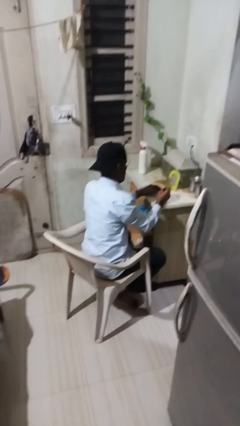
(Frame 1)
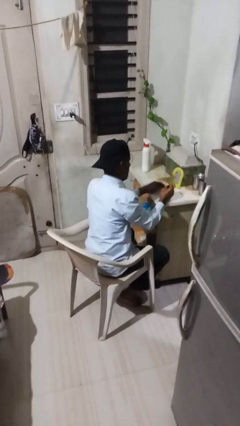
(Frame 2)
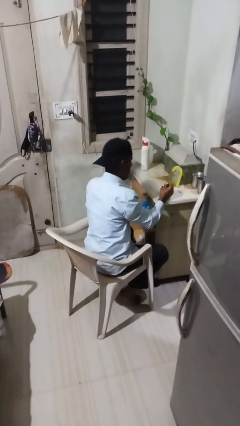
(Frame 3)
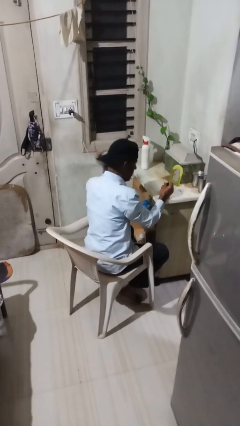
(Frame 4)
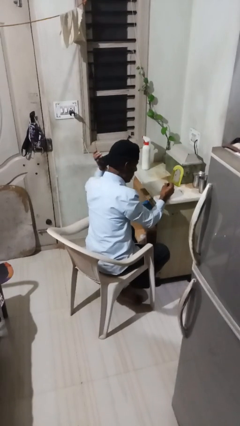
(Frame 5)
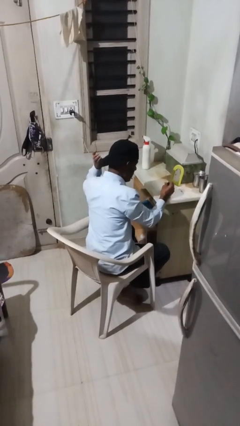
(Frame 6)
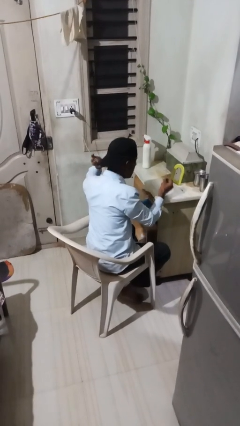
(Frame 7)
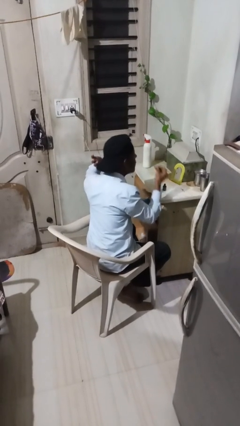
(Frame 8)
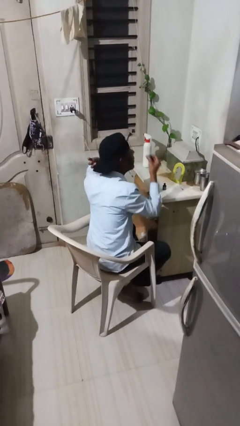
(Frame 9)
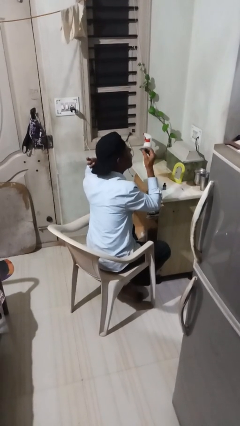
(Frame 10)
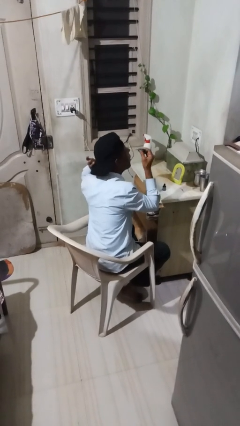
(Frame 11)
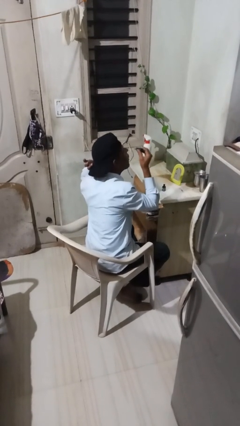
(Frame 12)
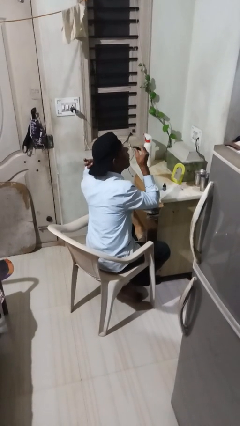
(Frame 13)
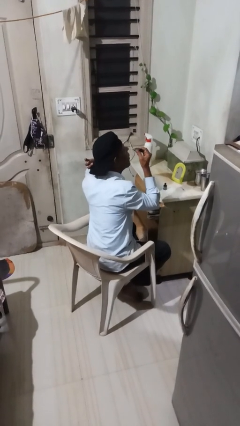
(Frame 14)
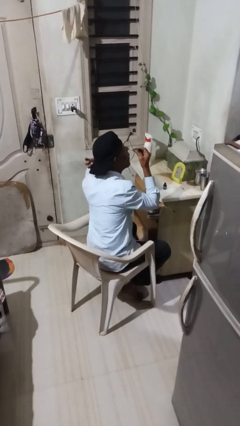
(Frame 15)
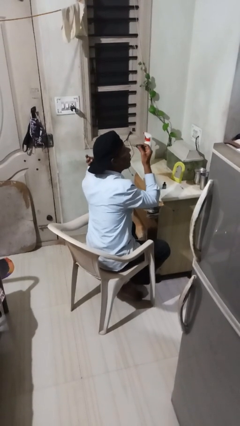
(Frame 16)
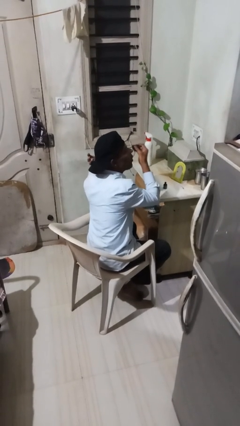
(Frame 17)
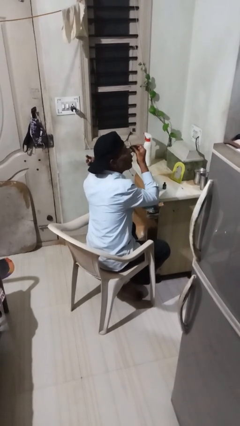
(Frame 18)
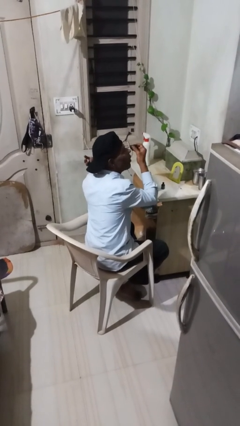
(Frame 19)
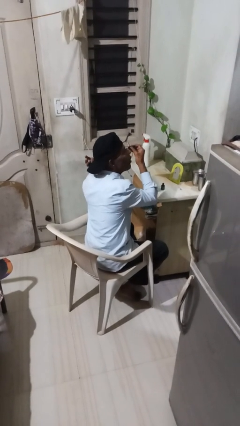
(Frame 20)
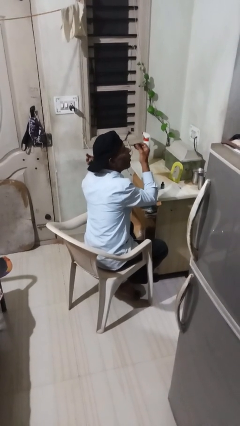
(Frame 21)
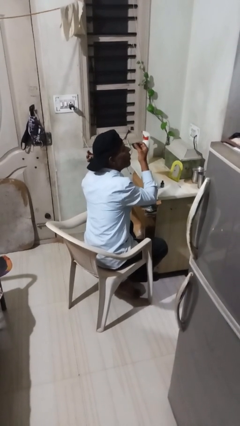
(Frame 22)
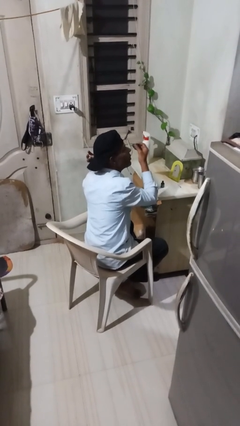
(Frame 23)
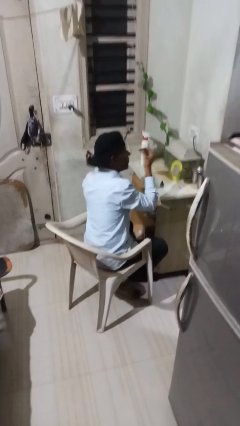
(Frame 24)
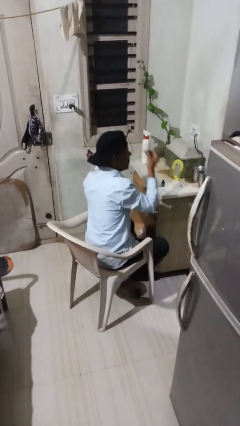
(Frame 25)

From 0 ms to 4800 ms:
person applies eye makeup

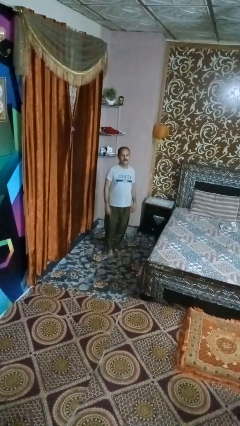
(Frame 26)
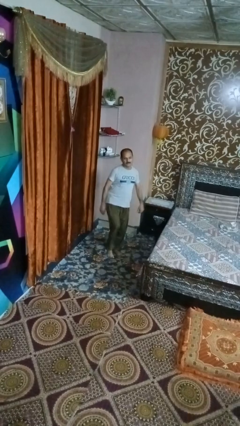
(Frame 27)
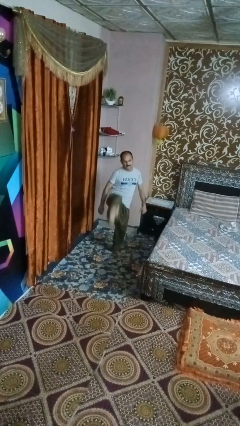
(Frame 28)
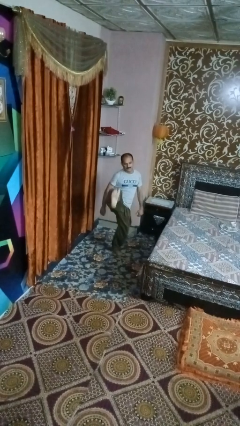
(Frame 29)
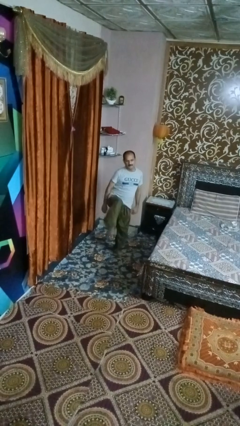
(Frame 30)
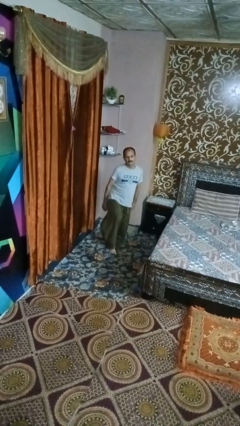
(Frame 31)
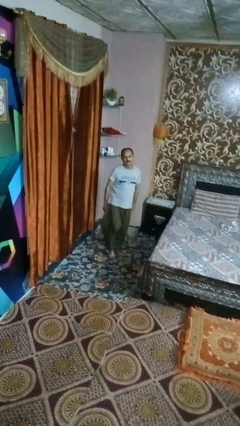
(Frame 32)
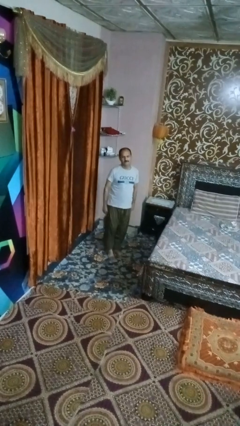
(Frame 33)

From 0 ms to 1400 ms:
person karate kicks

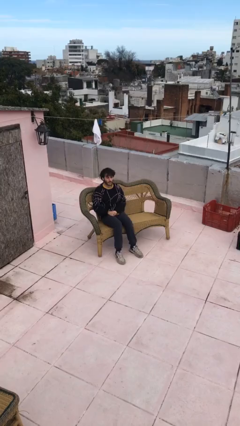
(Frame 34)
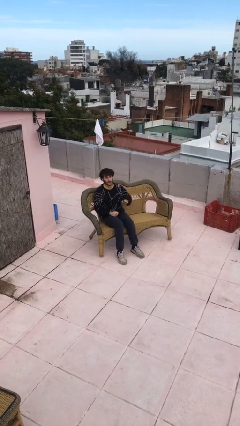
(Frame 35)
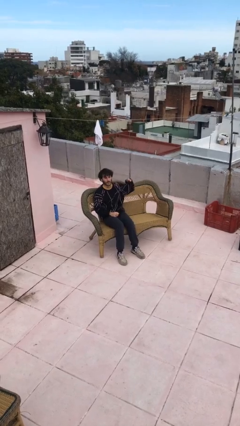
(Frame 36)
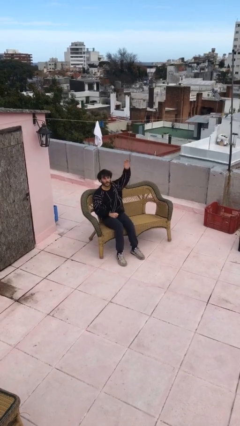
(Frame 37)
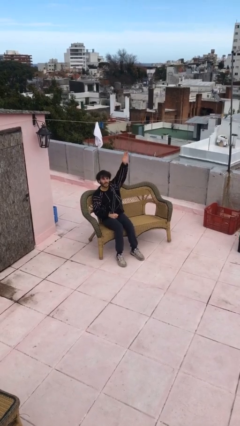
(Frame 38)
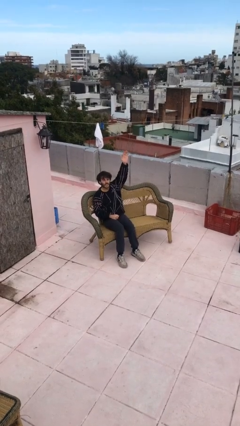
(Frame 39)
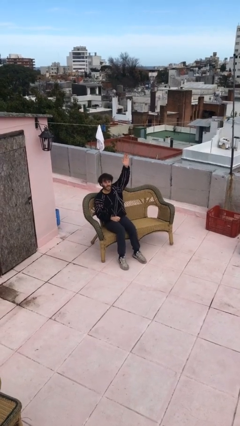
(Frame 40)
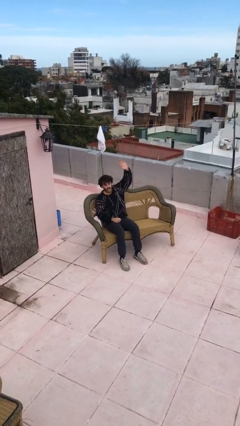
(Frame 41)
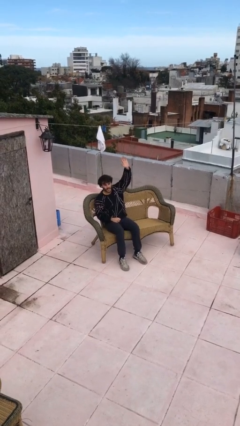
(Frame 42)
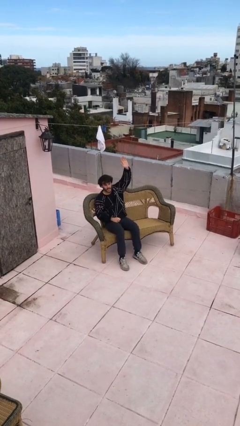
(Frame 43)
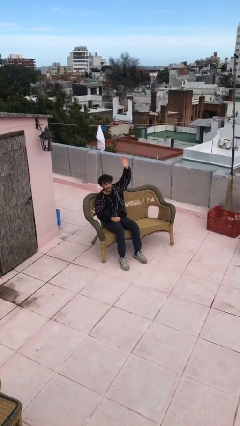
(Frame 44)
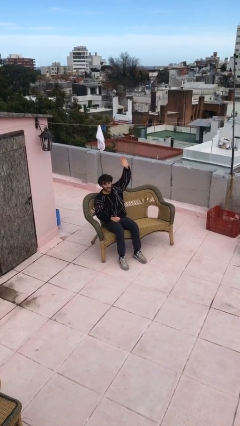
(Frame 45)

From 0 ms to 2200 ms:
person gestures raise hand

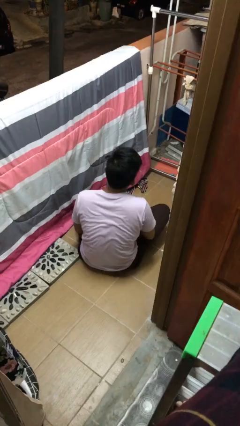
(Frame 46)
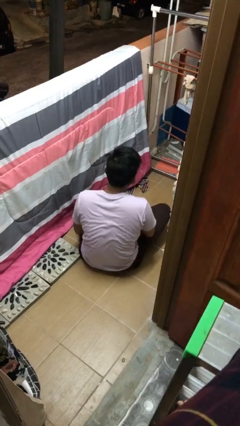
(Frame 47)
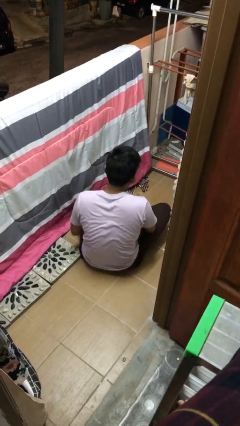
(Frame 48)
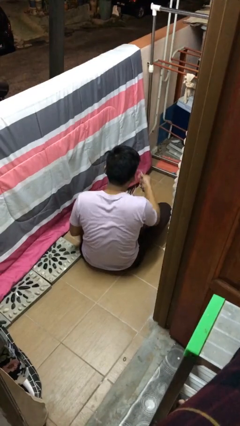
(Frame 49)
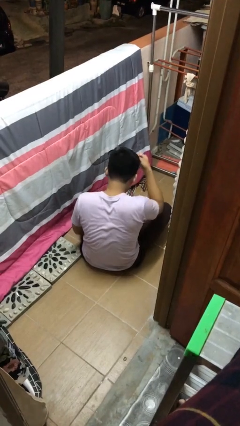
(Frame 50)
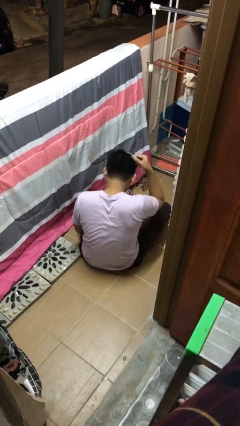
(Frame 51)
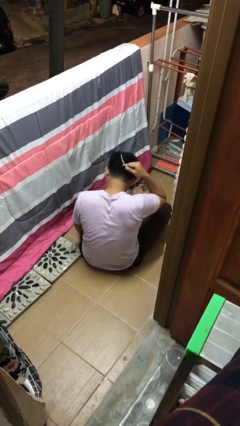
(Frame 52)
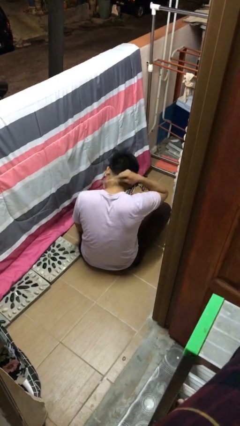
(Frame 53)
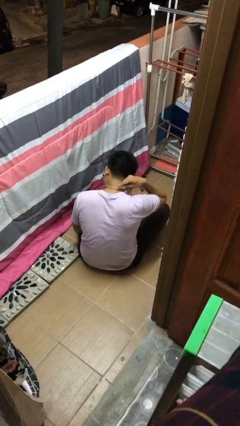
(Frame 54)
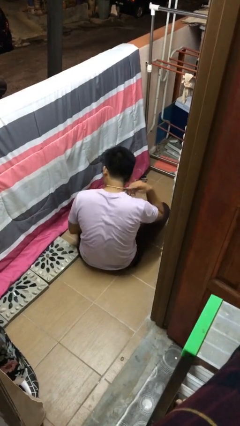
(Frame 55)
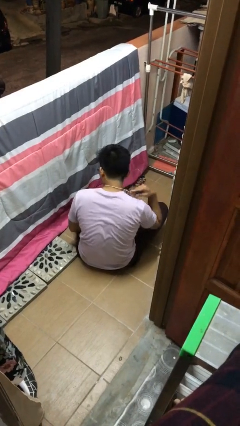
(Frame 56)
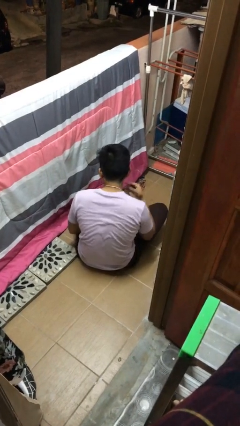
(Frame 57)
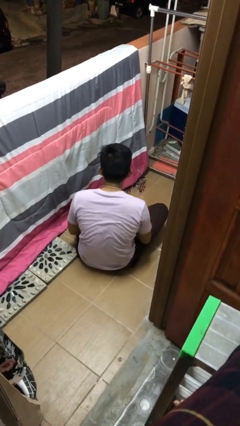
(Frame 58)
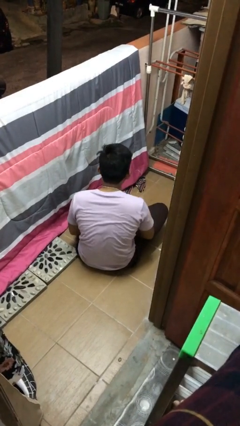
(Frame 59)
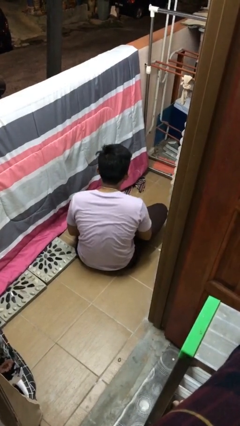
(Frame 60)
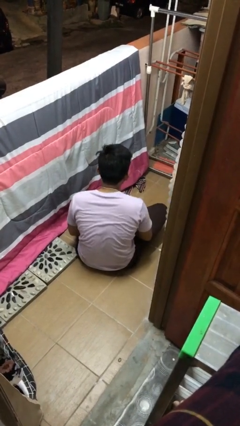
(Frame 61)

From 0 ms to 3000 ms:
person puts on necklace

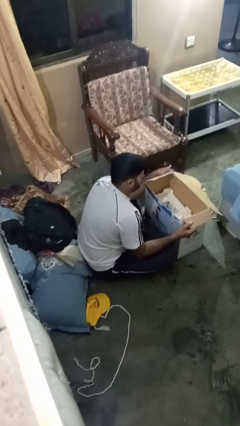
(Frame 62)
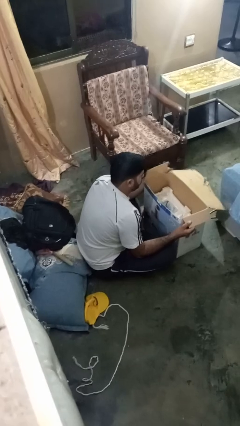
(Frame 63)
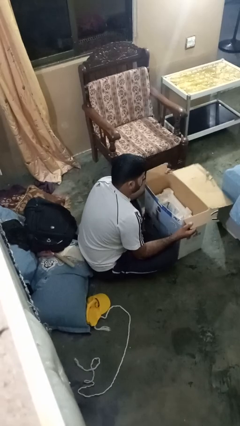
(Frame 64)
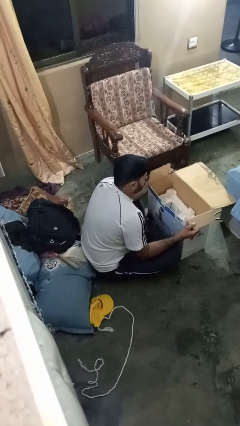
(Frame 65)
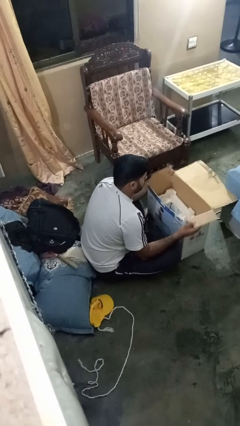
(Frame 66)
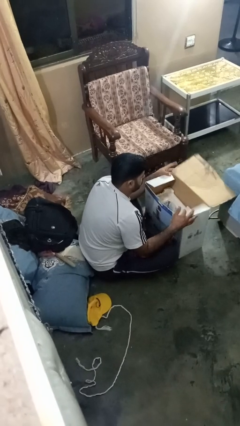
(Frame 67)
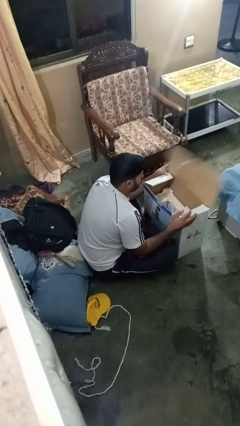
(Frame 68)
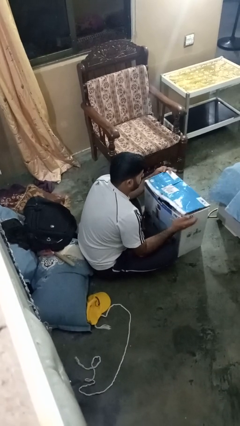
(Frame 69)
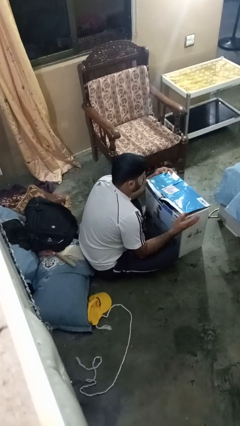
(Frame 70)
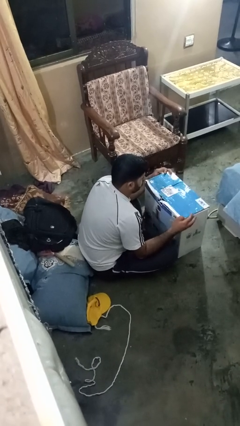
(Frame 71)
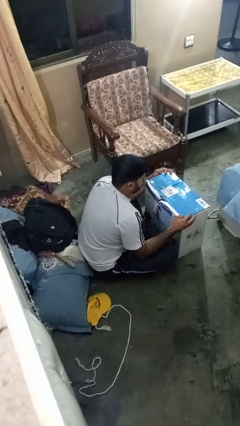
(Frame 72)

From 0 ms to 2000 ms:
person closes box

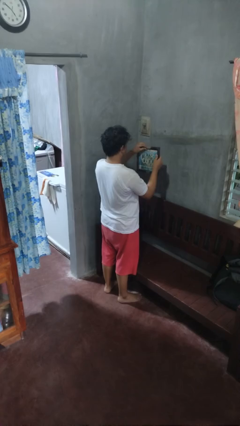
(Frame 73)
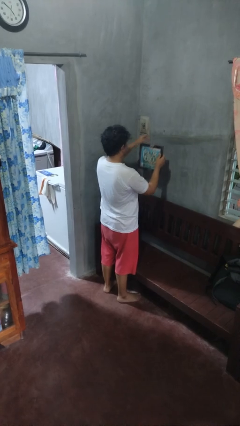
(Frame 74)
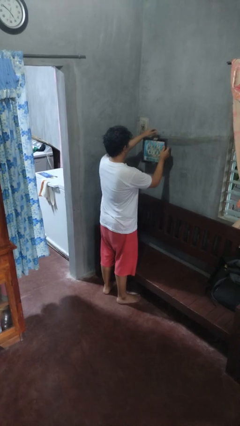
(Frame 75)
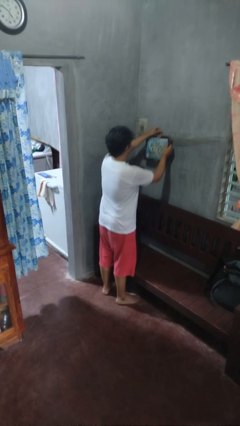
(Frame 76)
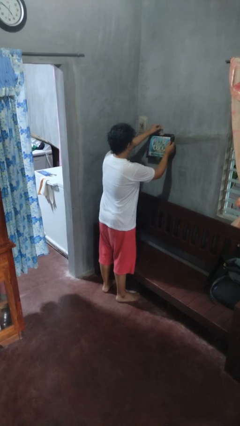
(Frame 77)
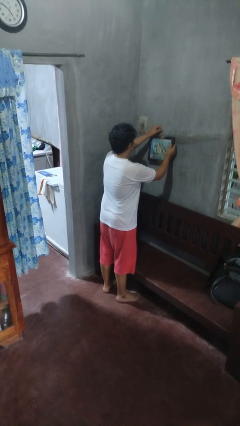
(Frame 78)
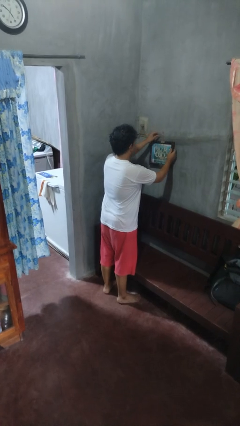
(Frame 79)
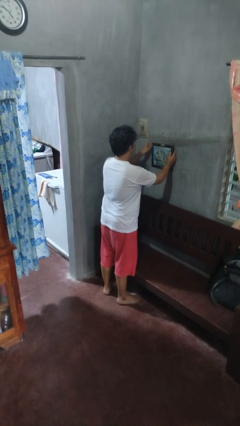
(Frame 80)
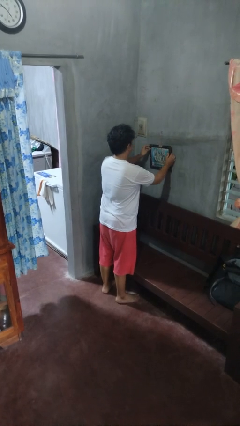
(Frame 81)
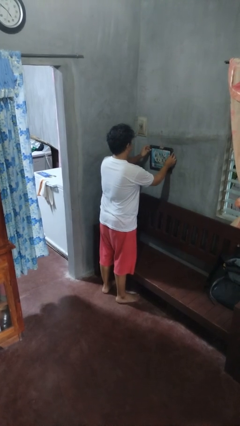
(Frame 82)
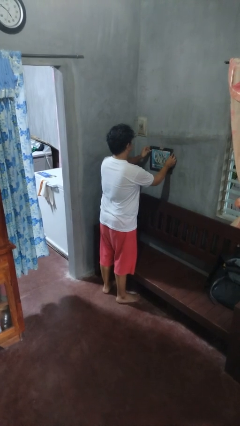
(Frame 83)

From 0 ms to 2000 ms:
person puts up picture frame

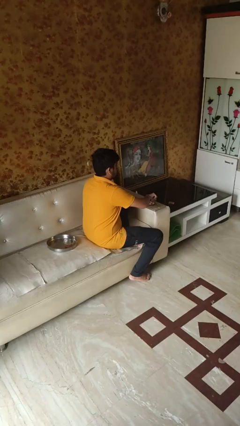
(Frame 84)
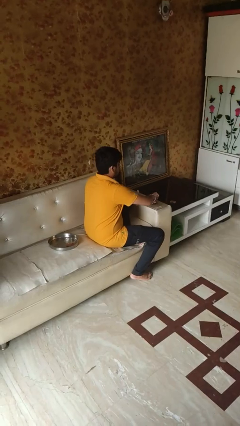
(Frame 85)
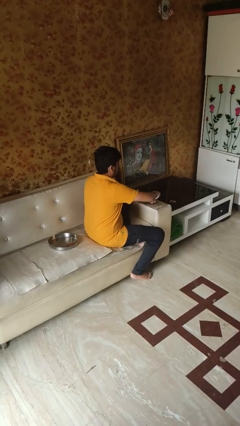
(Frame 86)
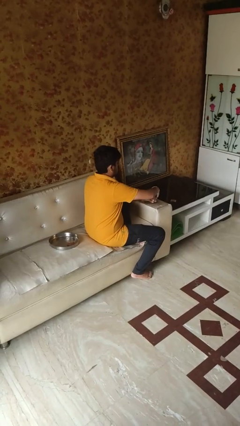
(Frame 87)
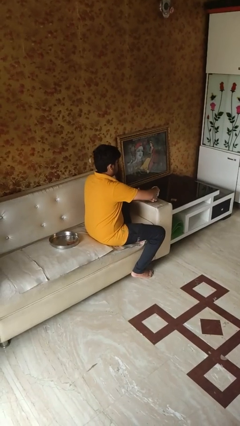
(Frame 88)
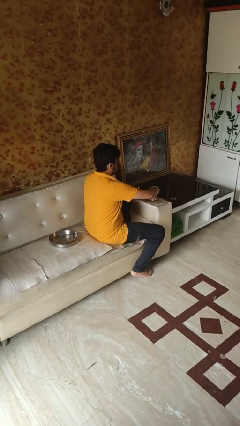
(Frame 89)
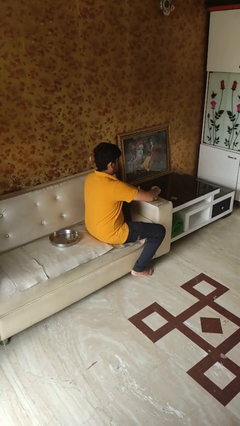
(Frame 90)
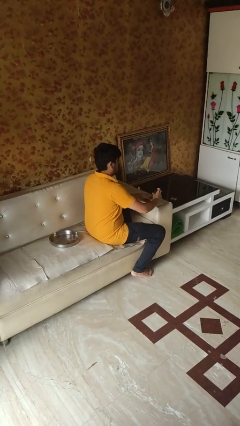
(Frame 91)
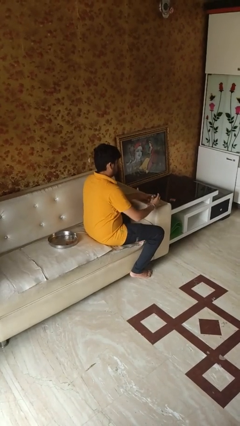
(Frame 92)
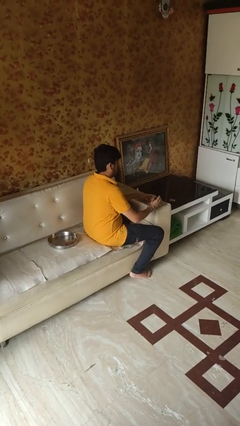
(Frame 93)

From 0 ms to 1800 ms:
person opens jar
